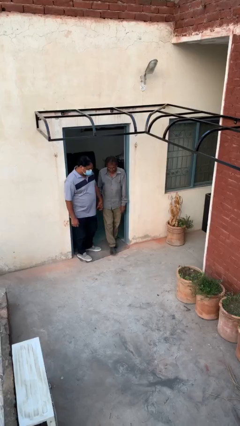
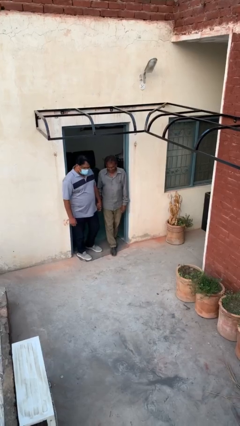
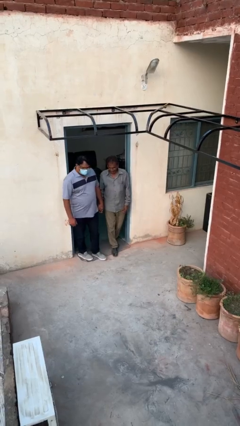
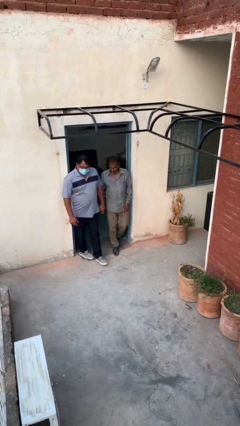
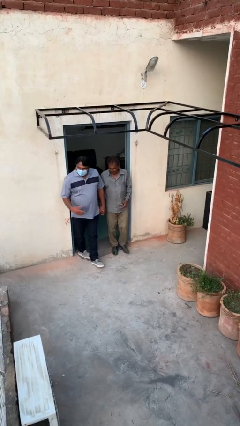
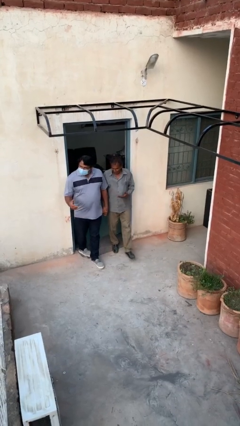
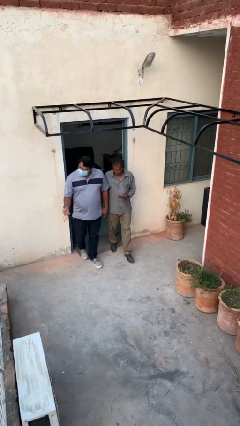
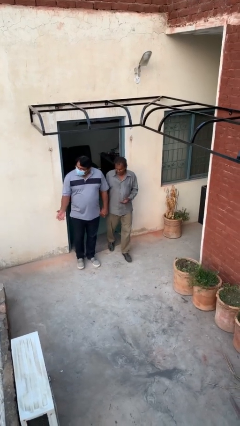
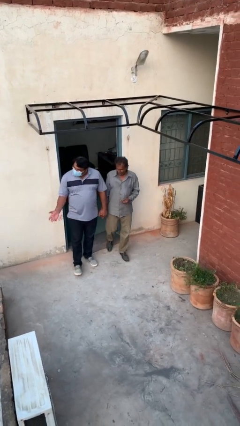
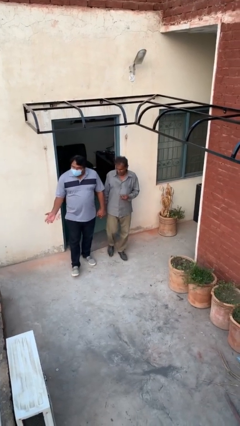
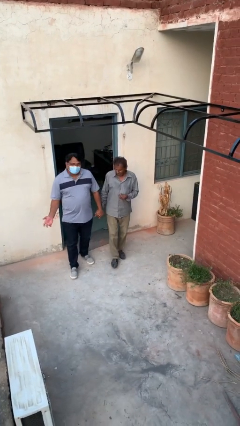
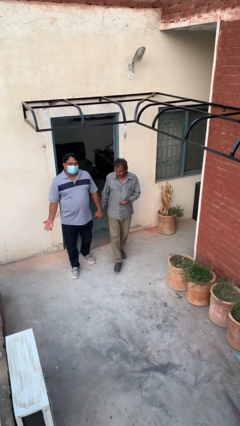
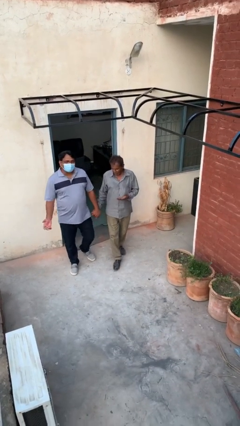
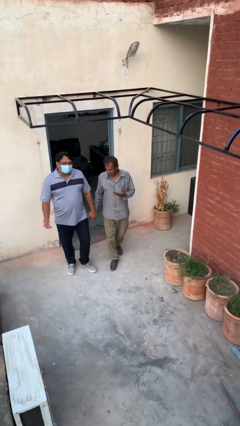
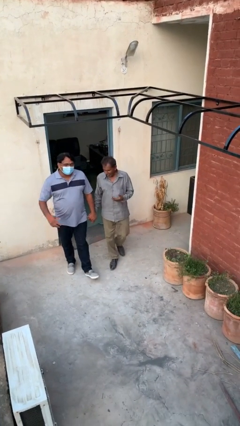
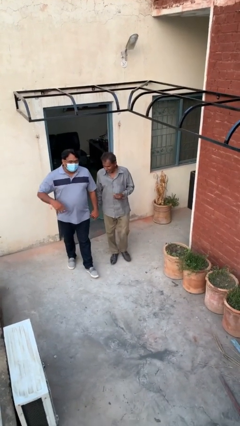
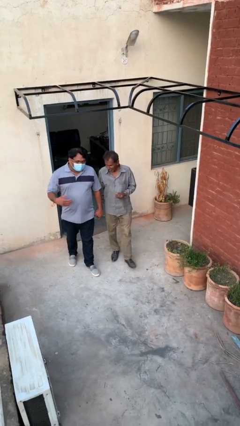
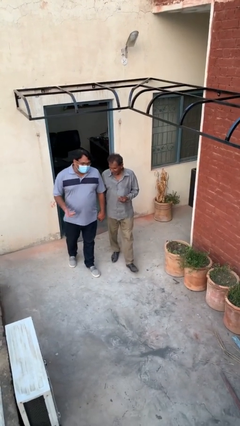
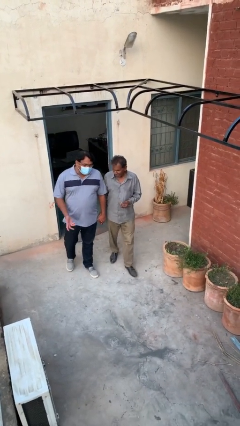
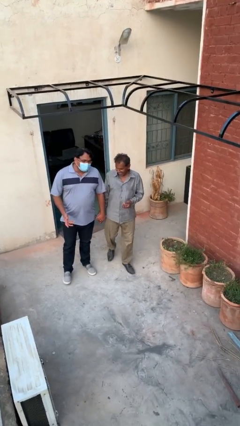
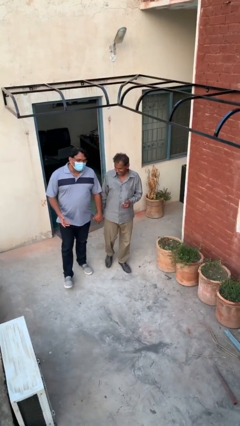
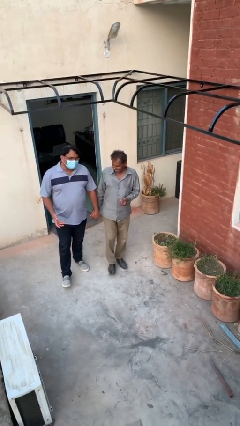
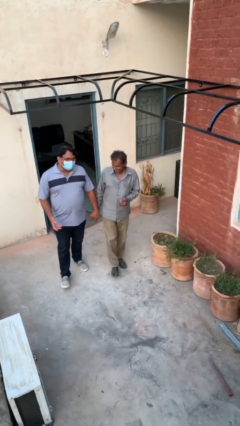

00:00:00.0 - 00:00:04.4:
person holds hand

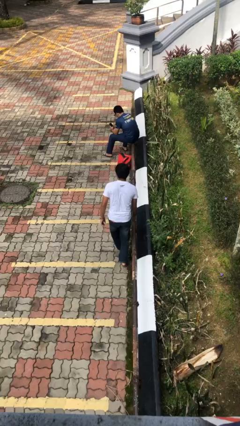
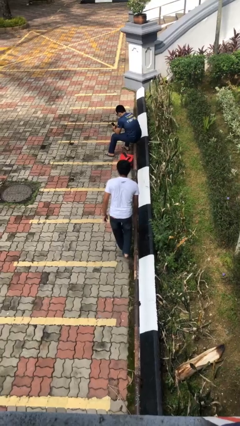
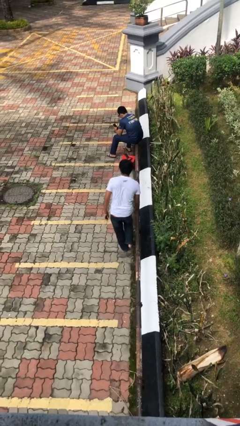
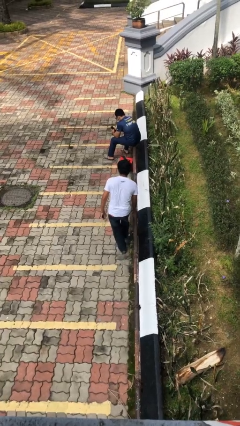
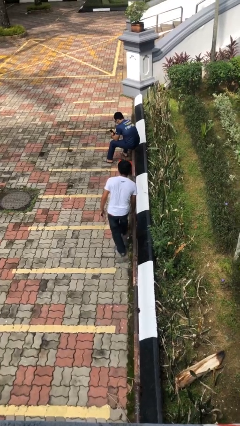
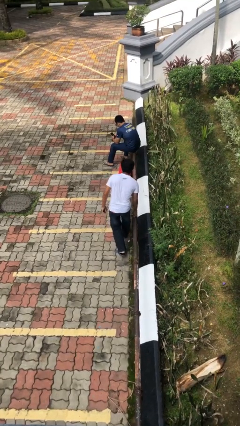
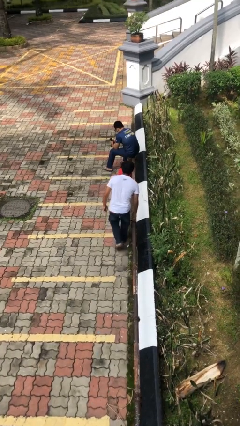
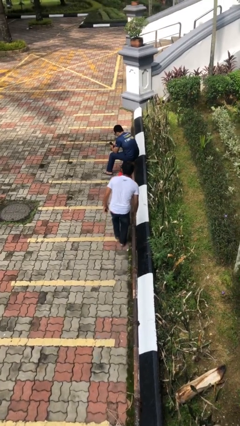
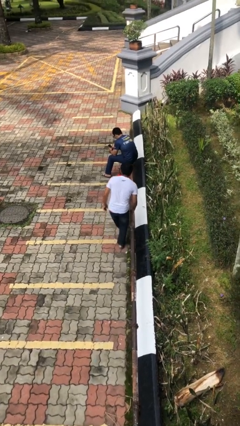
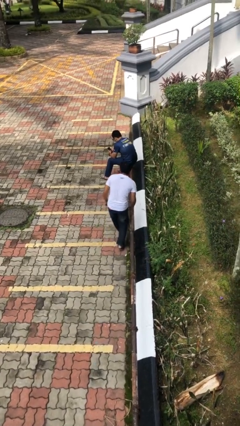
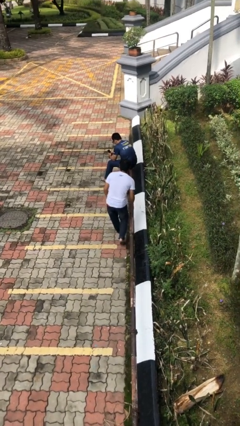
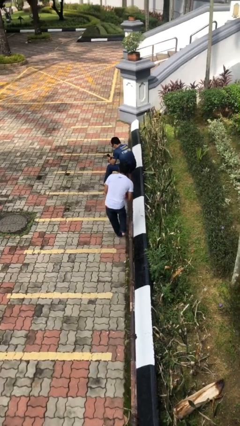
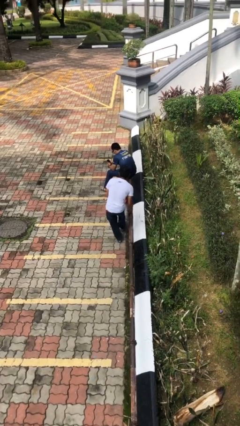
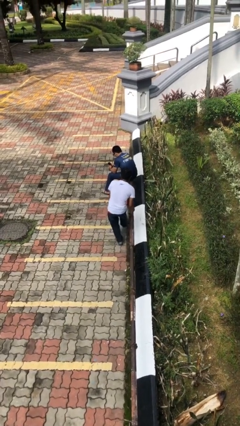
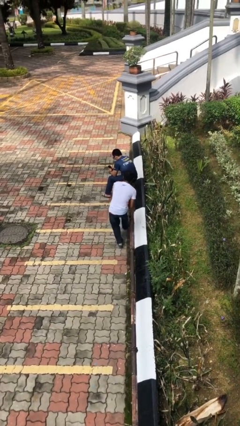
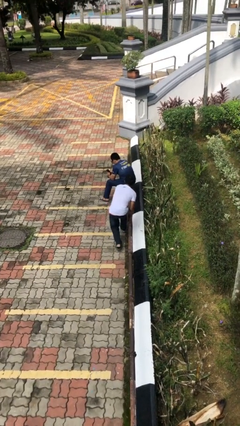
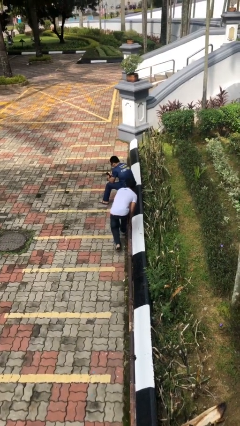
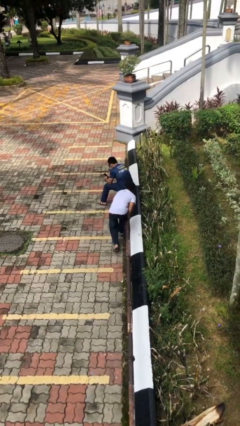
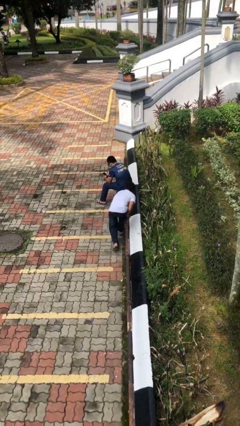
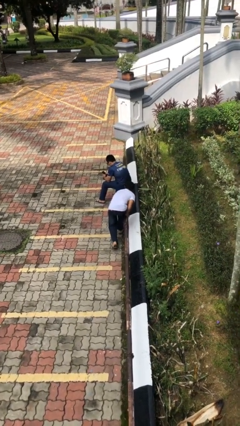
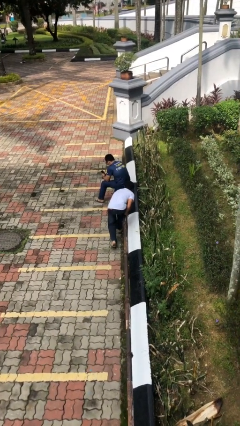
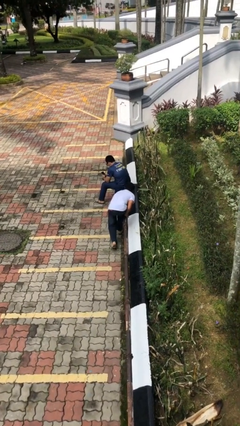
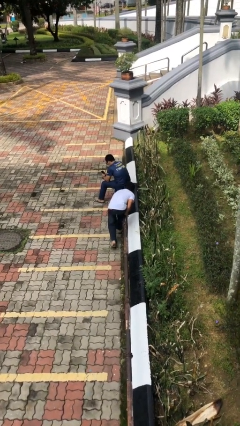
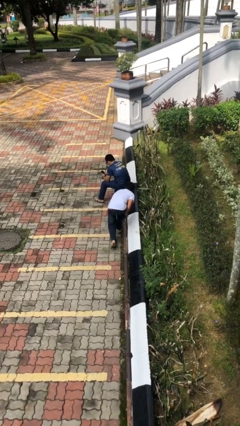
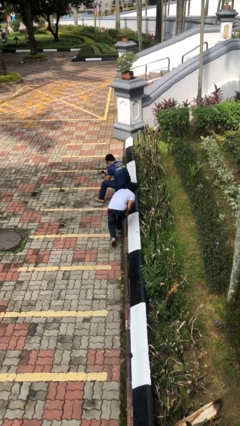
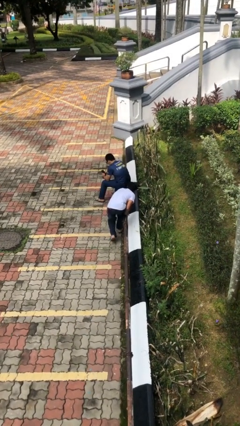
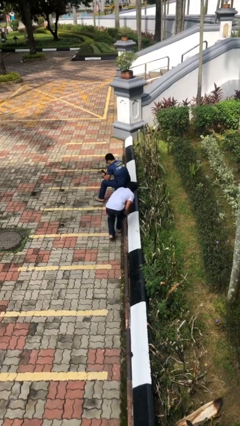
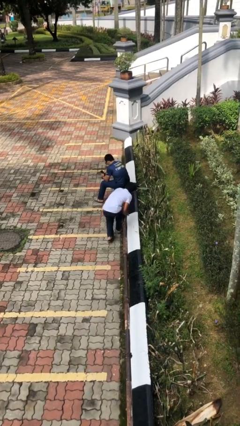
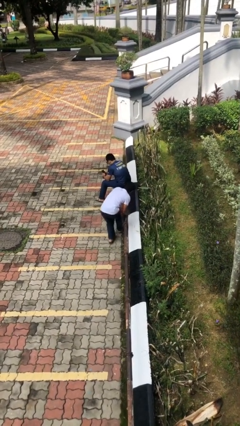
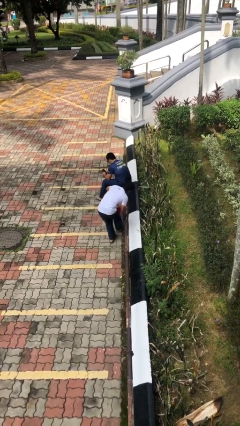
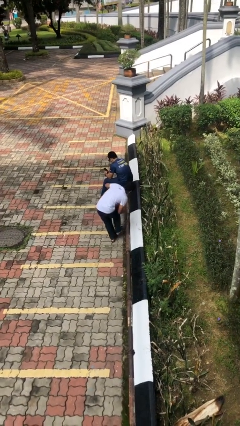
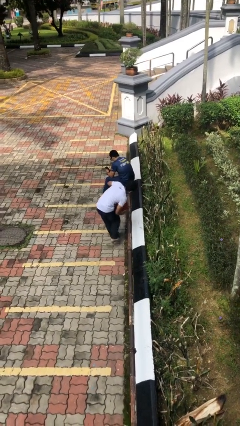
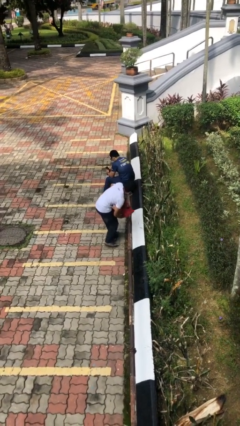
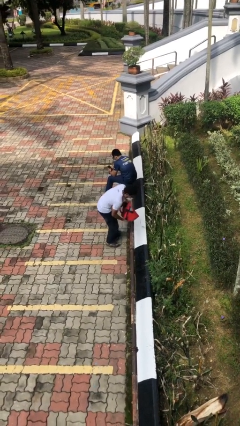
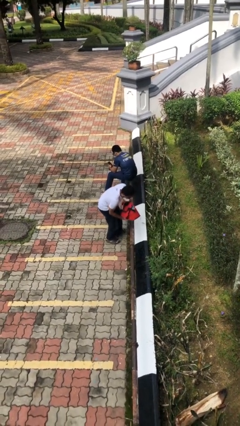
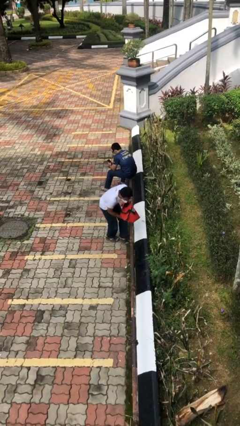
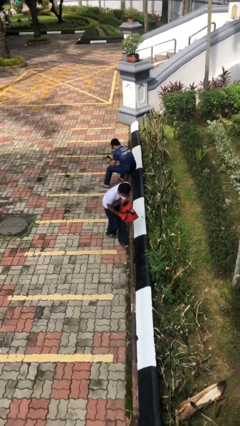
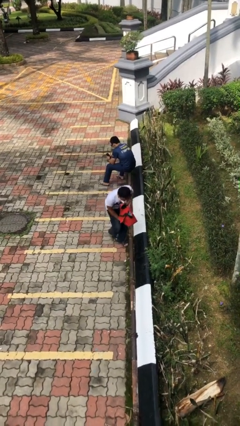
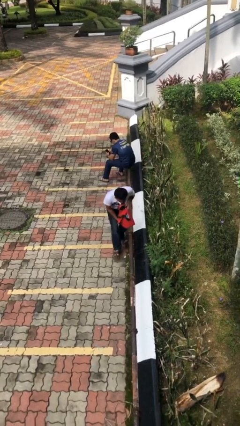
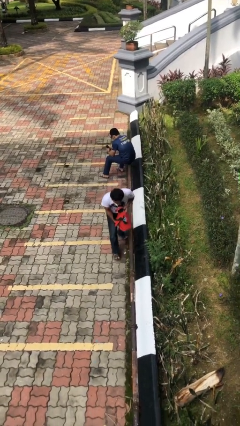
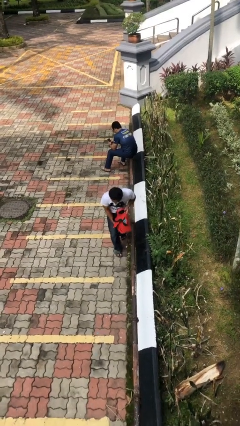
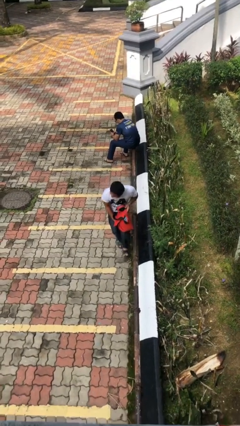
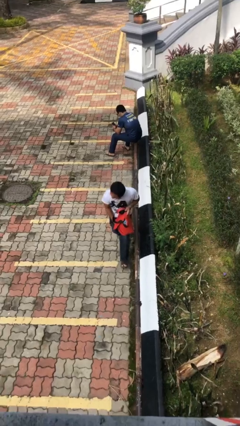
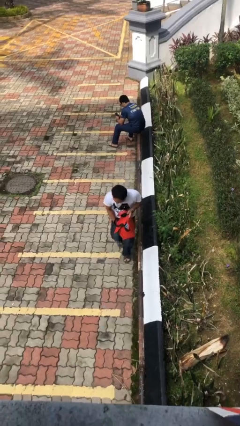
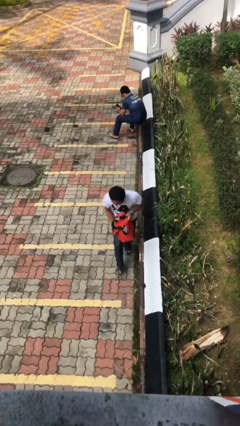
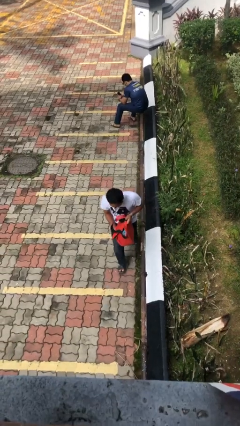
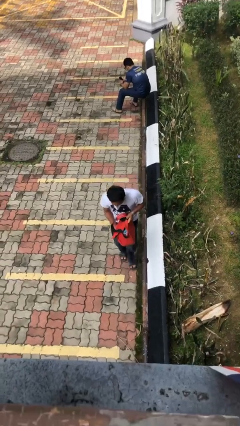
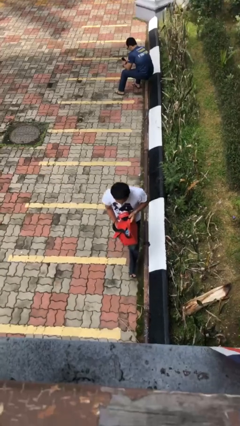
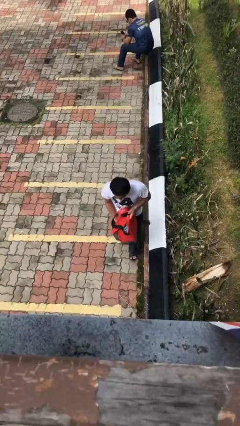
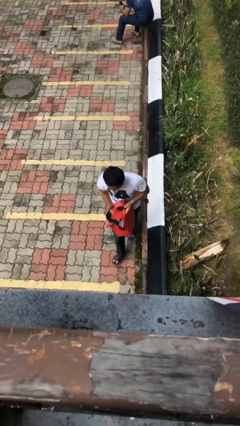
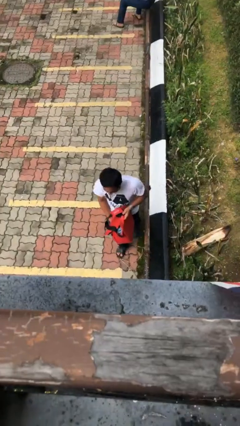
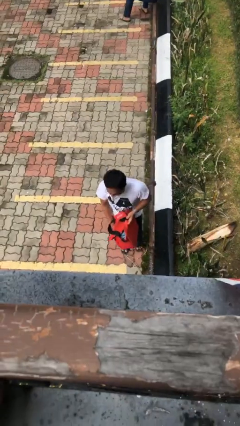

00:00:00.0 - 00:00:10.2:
person steals object from person

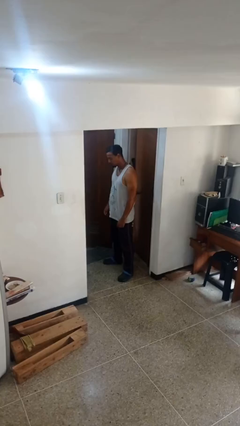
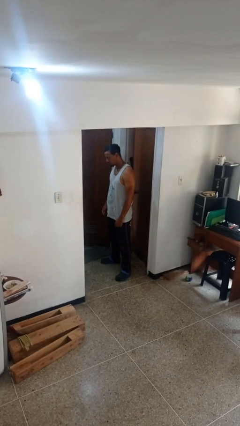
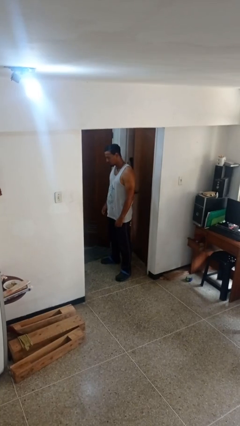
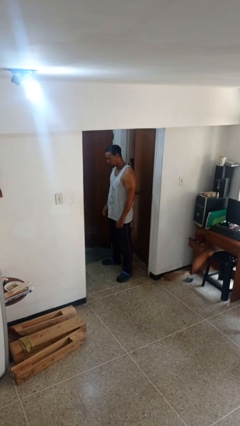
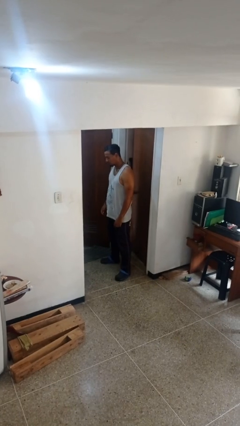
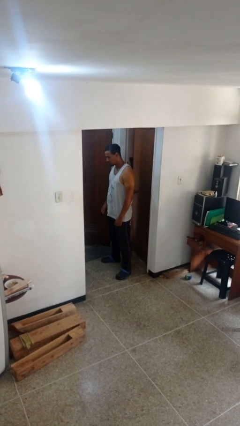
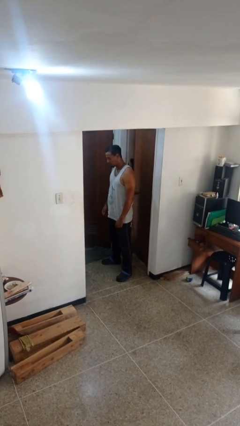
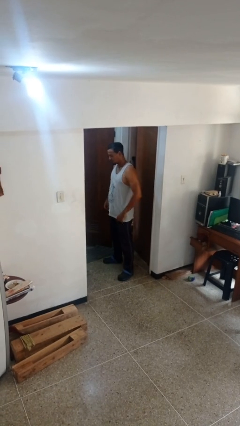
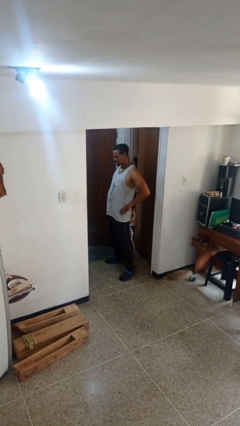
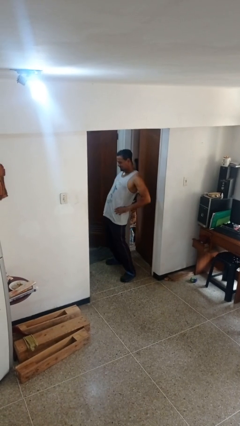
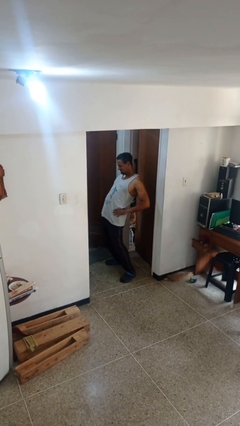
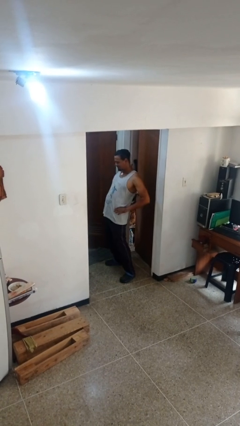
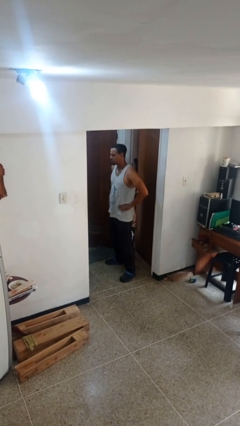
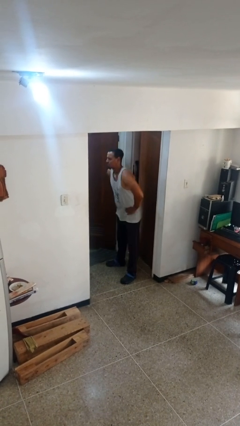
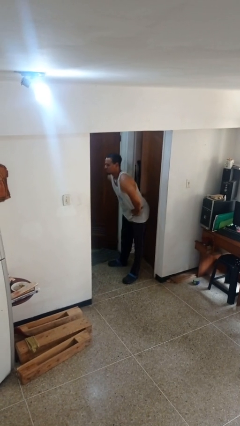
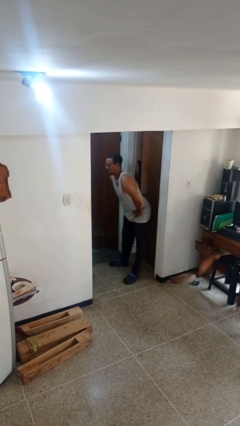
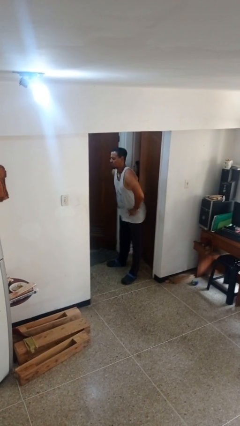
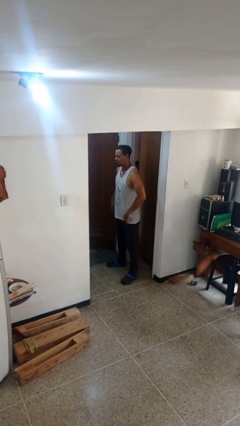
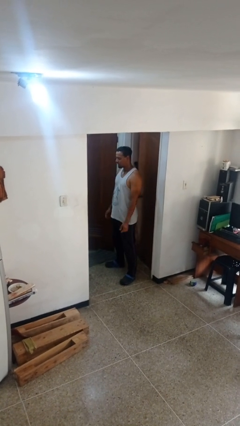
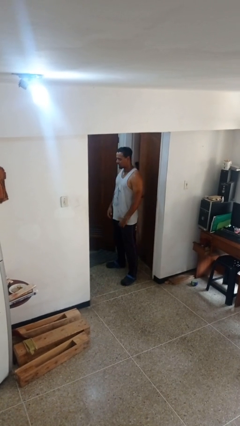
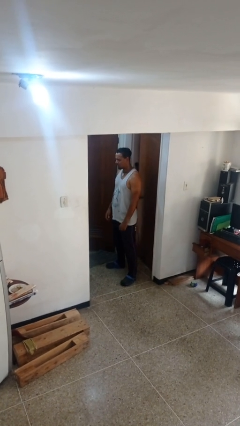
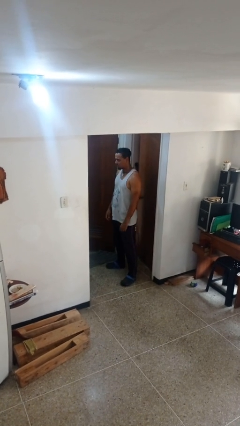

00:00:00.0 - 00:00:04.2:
person wiggles hips
